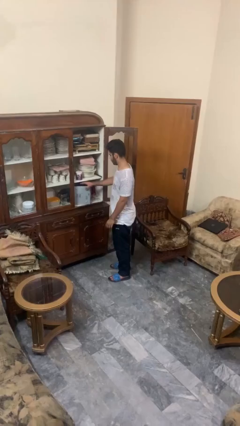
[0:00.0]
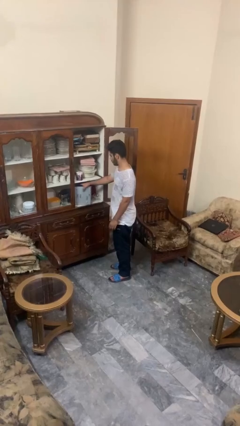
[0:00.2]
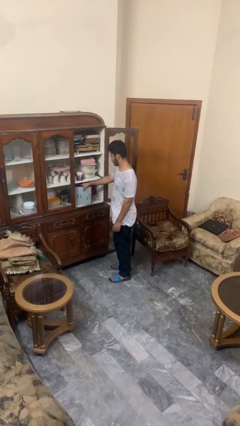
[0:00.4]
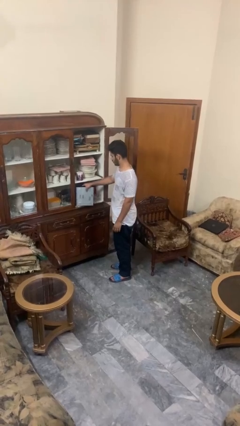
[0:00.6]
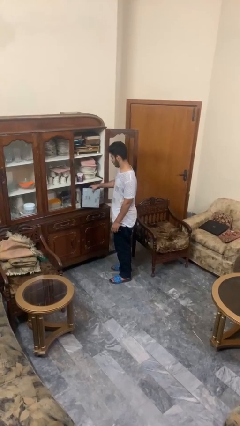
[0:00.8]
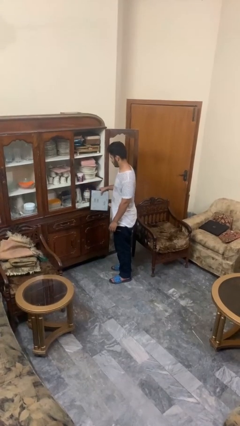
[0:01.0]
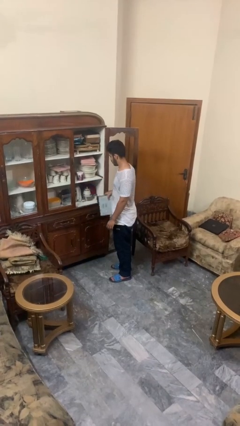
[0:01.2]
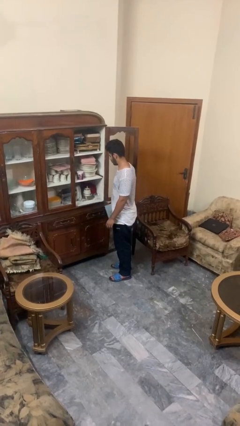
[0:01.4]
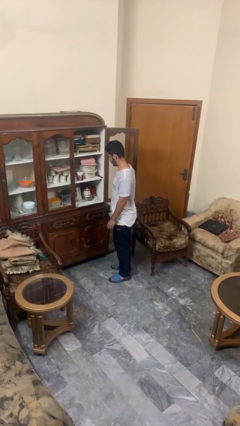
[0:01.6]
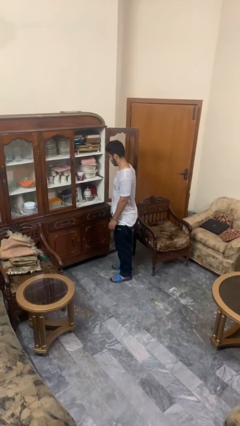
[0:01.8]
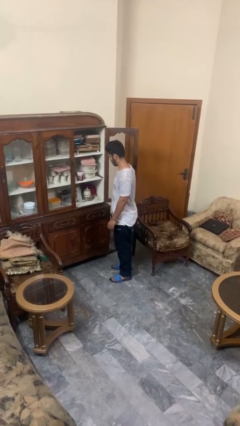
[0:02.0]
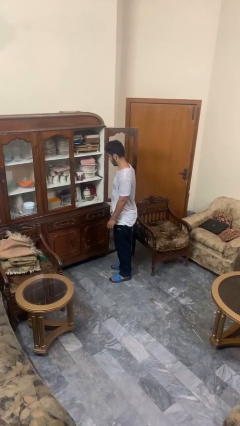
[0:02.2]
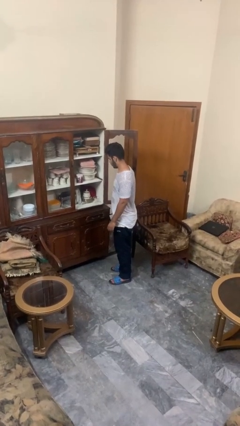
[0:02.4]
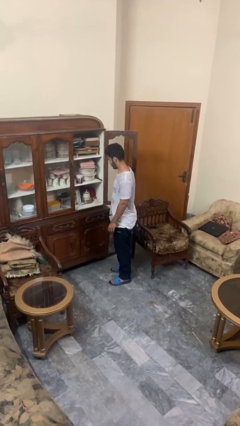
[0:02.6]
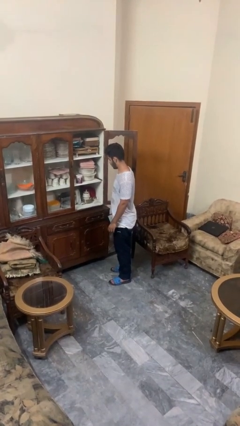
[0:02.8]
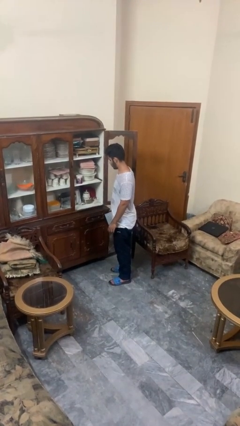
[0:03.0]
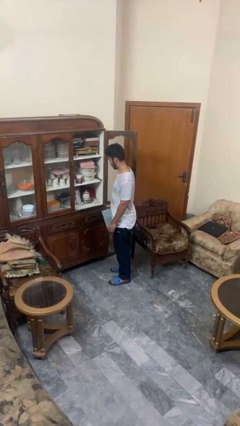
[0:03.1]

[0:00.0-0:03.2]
person picks up object from cabinet

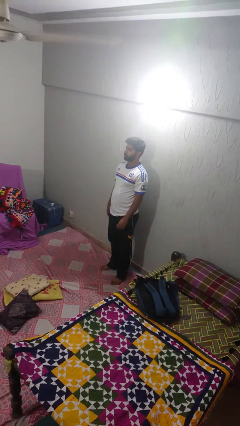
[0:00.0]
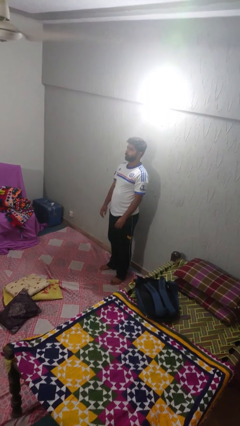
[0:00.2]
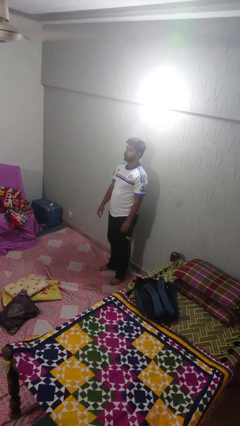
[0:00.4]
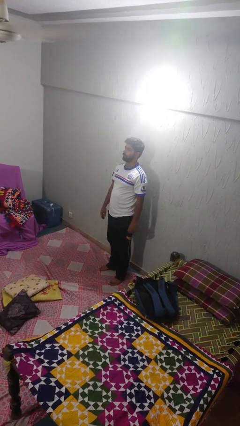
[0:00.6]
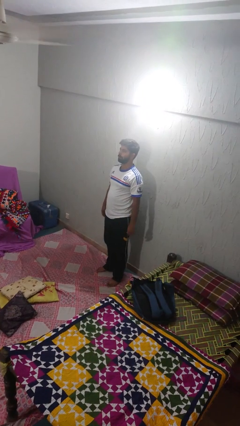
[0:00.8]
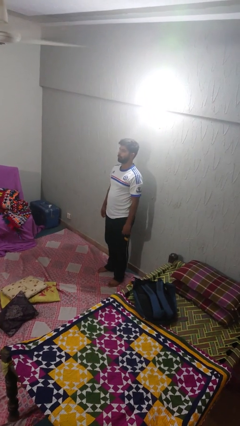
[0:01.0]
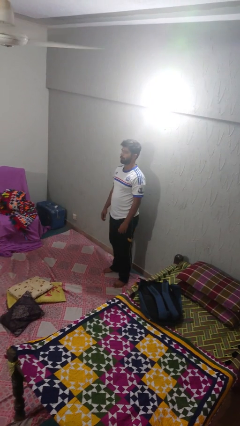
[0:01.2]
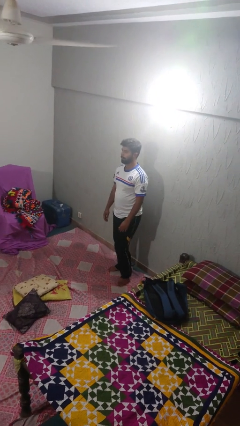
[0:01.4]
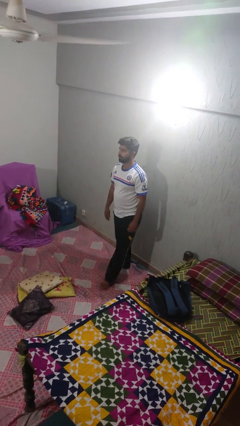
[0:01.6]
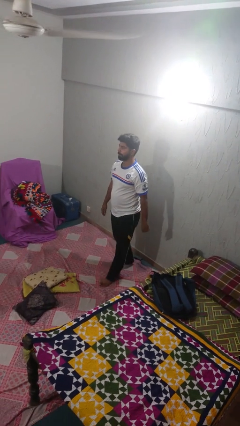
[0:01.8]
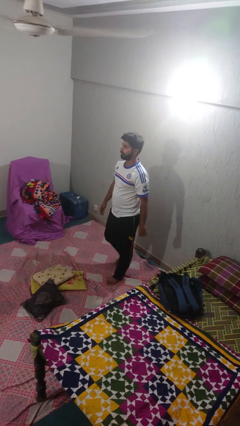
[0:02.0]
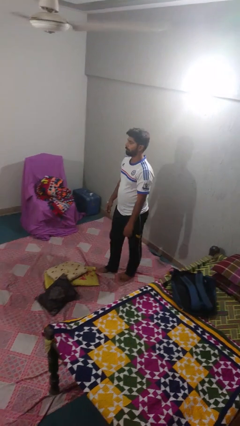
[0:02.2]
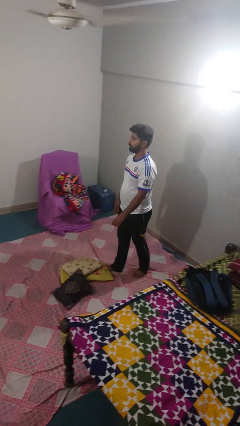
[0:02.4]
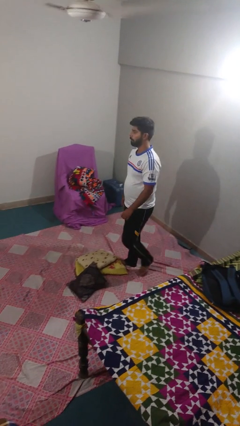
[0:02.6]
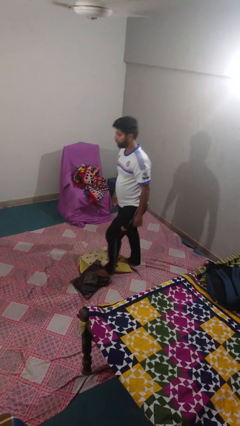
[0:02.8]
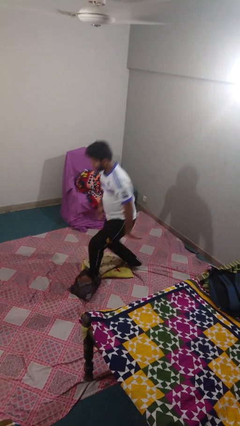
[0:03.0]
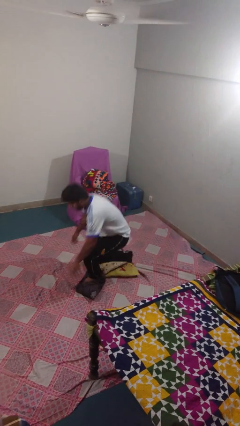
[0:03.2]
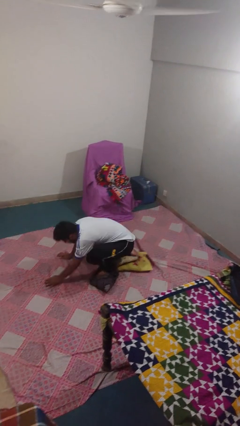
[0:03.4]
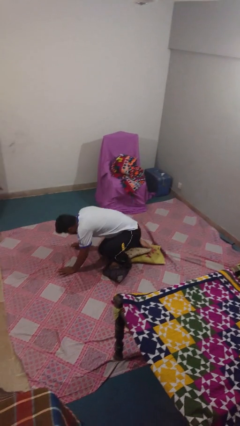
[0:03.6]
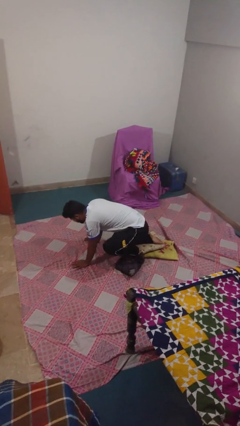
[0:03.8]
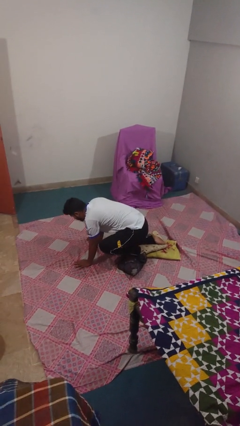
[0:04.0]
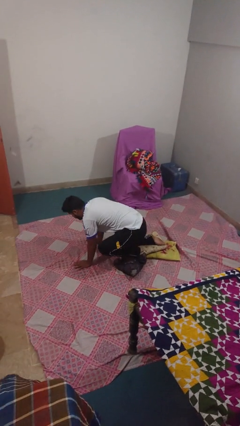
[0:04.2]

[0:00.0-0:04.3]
person trips on object on floor

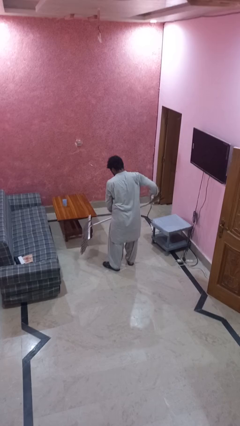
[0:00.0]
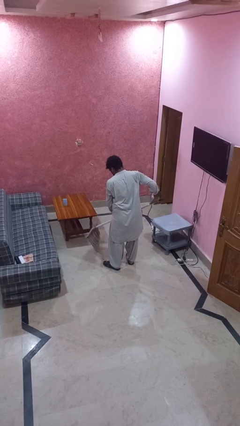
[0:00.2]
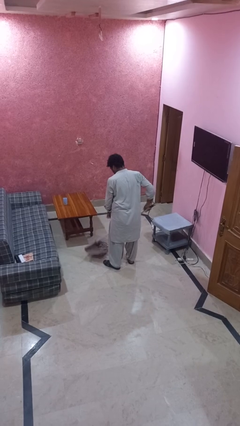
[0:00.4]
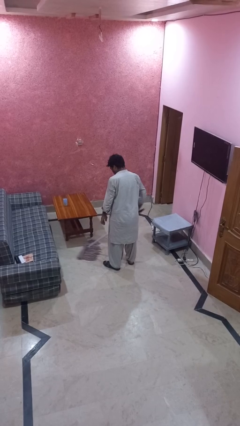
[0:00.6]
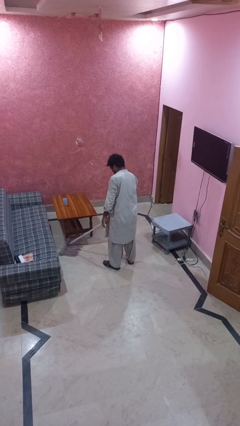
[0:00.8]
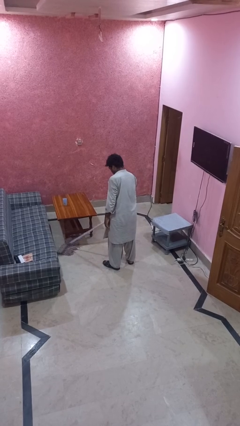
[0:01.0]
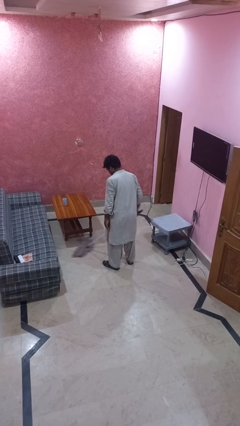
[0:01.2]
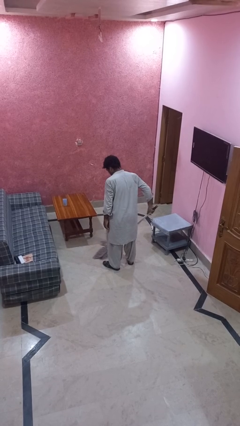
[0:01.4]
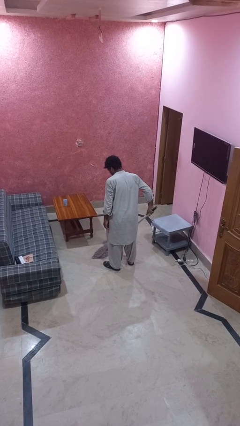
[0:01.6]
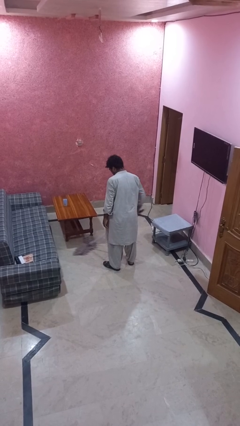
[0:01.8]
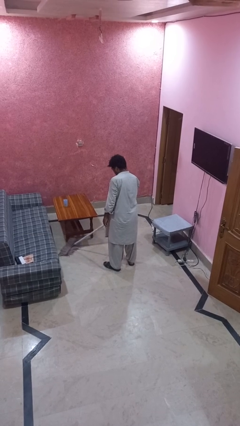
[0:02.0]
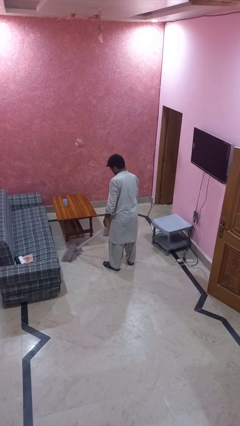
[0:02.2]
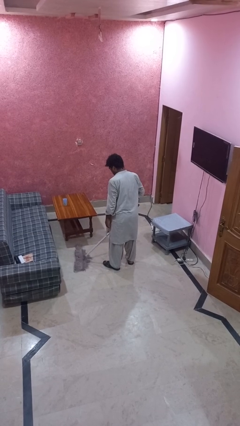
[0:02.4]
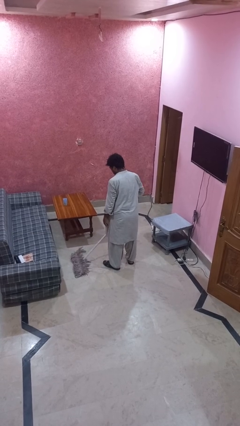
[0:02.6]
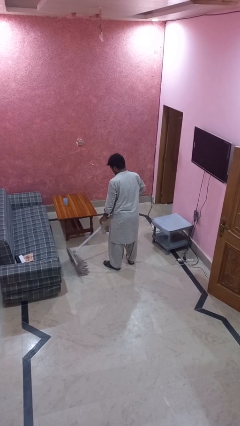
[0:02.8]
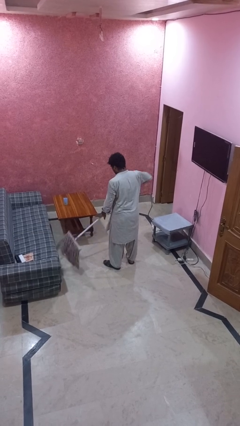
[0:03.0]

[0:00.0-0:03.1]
person mops

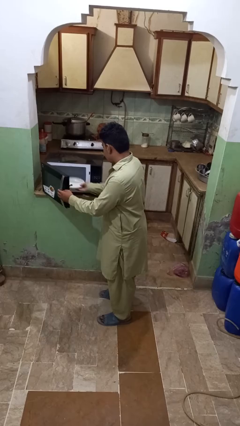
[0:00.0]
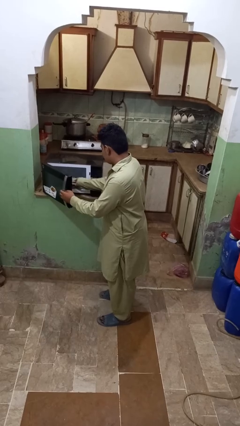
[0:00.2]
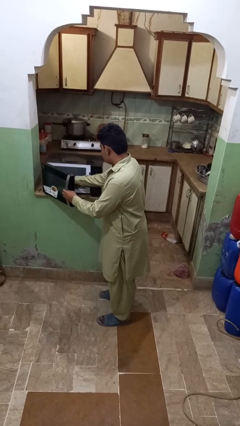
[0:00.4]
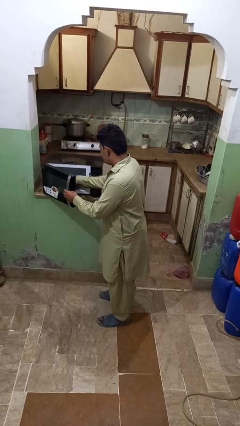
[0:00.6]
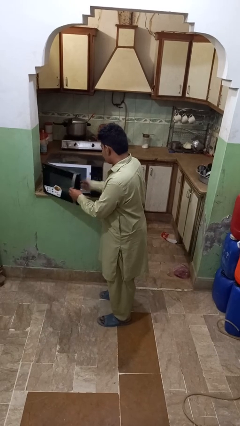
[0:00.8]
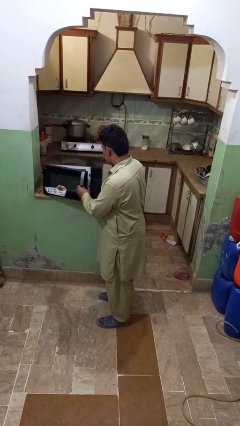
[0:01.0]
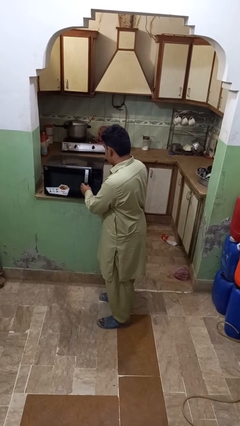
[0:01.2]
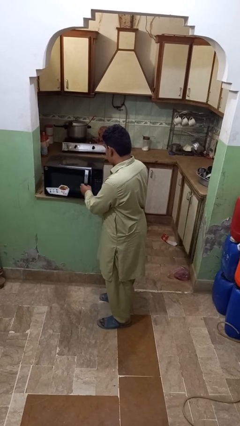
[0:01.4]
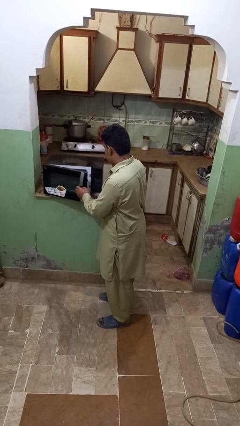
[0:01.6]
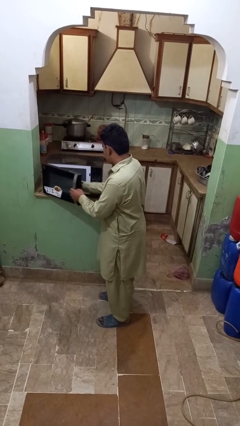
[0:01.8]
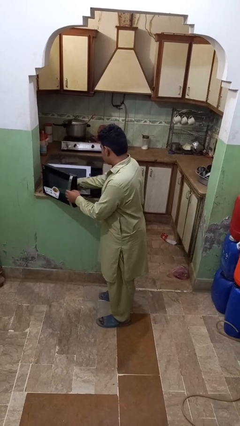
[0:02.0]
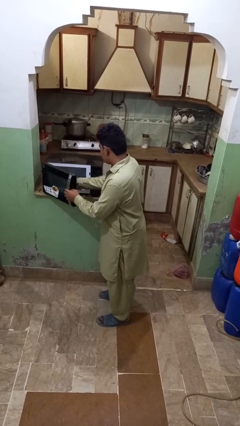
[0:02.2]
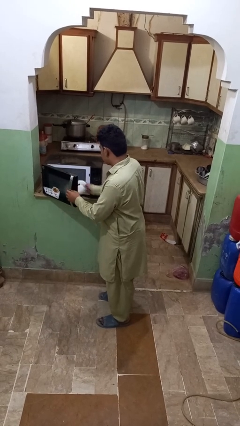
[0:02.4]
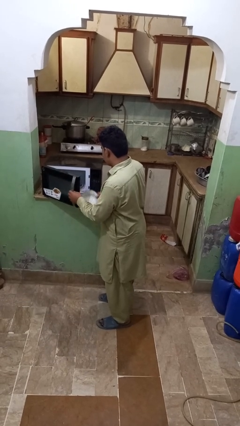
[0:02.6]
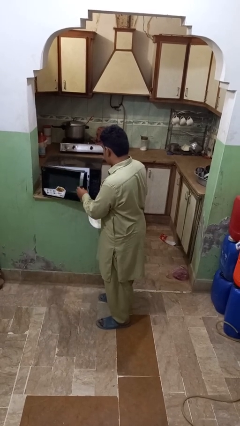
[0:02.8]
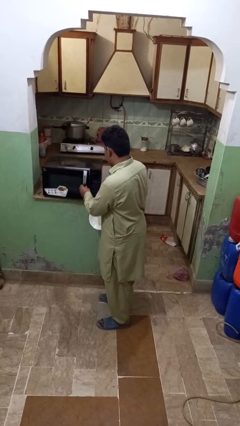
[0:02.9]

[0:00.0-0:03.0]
person takes object from microwave

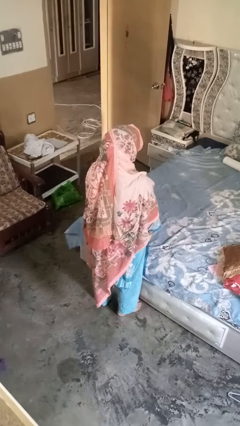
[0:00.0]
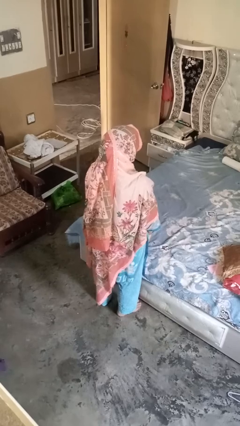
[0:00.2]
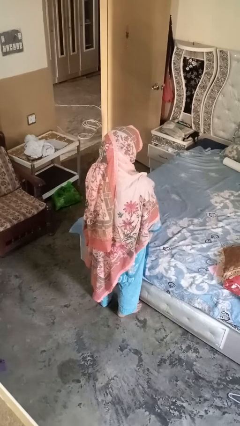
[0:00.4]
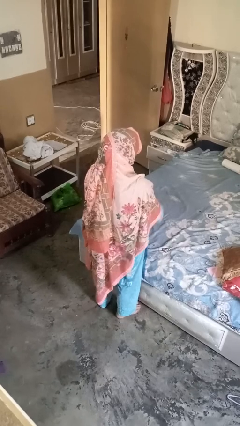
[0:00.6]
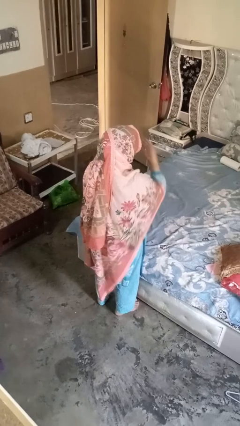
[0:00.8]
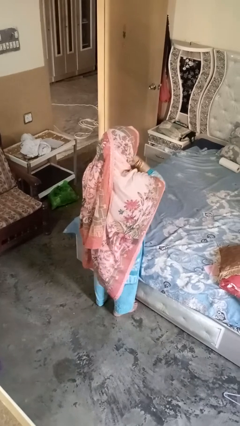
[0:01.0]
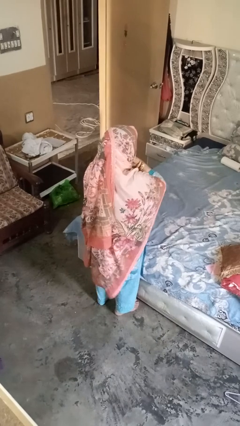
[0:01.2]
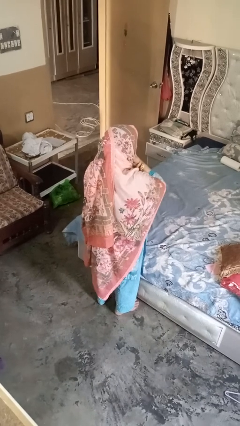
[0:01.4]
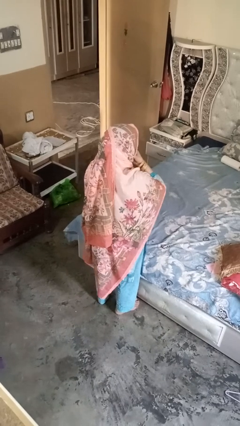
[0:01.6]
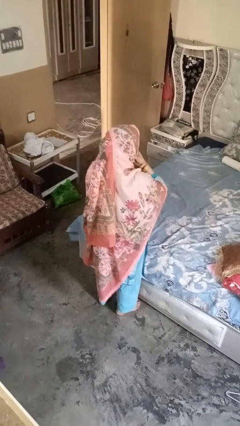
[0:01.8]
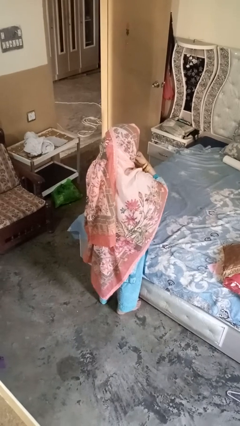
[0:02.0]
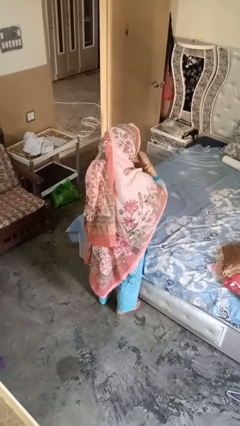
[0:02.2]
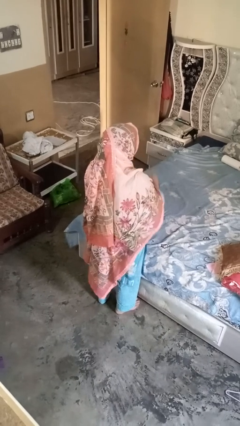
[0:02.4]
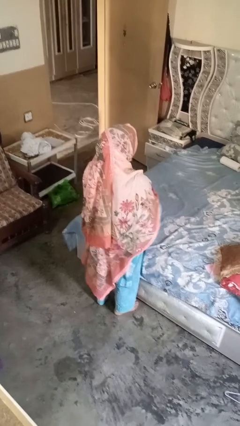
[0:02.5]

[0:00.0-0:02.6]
person strokes chin

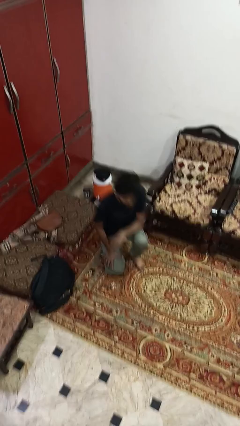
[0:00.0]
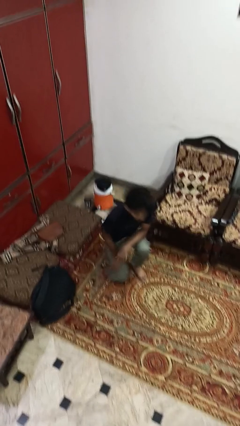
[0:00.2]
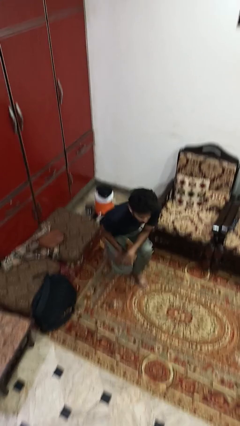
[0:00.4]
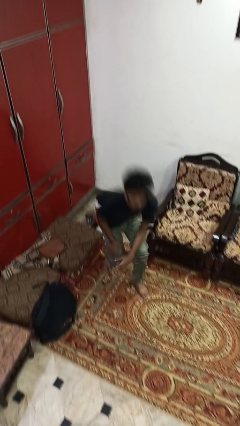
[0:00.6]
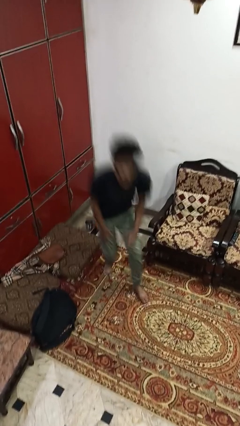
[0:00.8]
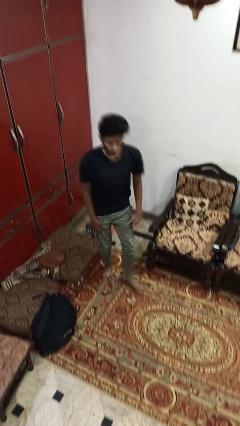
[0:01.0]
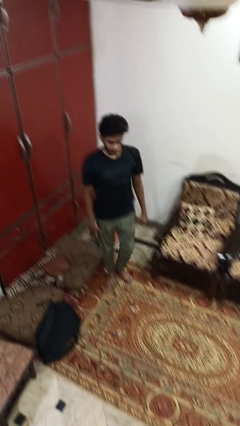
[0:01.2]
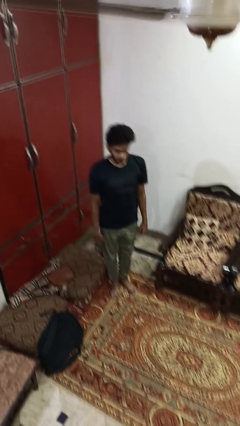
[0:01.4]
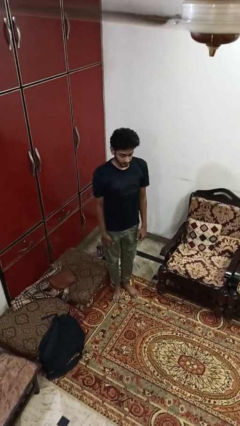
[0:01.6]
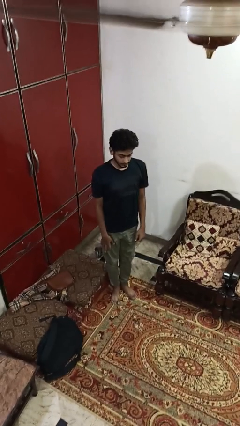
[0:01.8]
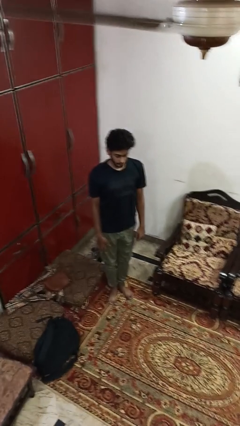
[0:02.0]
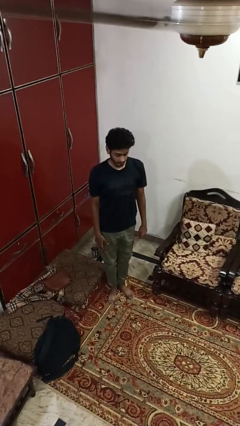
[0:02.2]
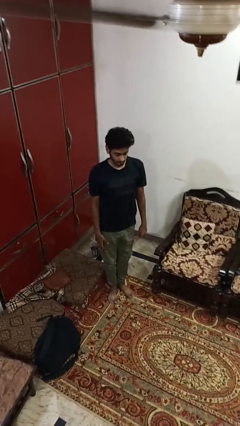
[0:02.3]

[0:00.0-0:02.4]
person stands up from floor
